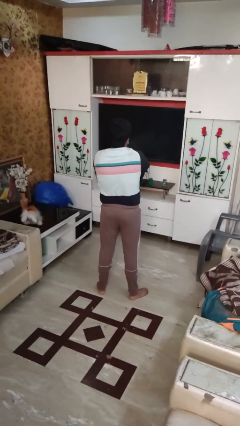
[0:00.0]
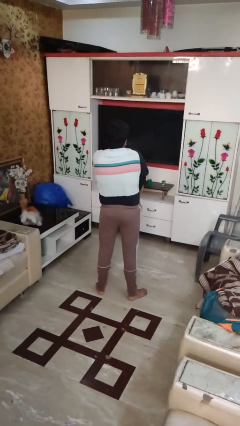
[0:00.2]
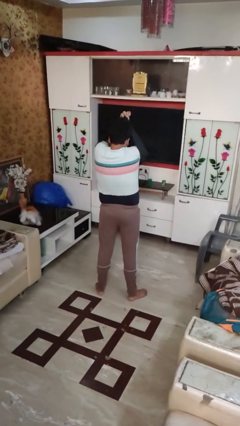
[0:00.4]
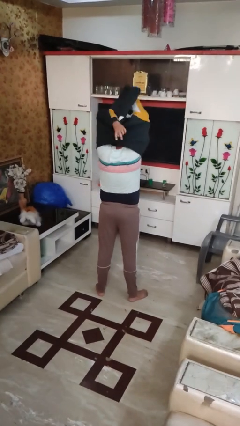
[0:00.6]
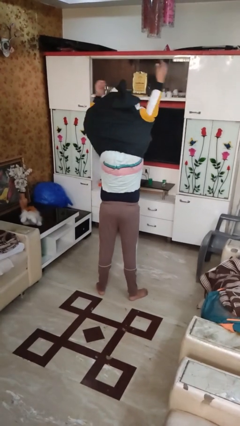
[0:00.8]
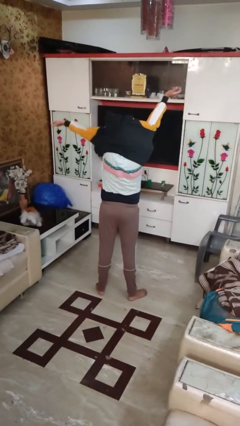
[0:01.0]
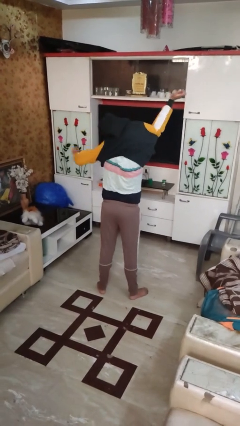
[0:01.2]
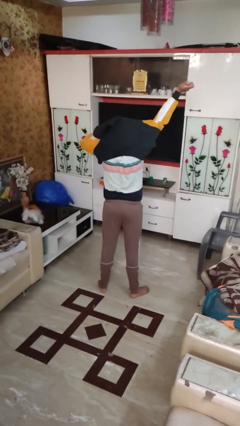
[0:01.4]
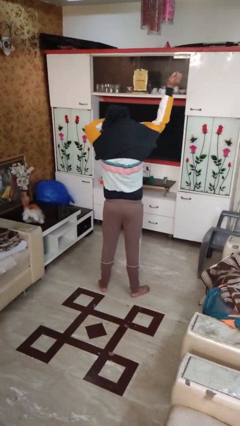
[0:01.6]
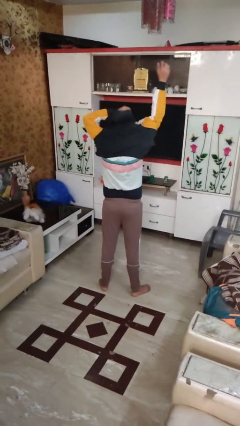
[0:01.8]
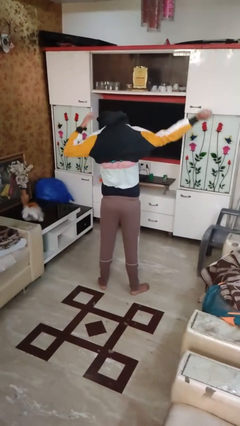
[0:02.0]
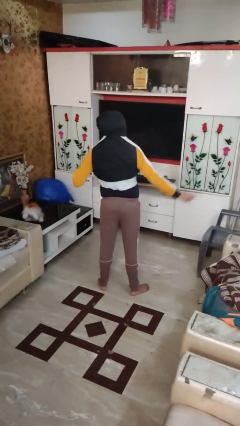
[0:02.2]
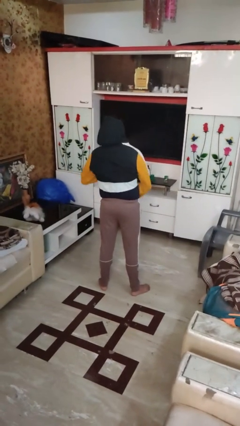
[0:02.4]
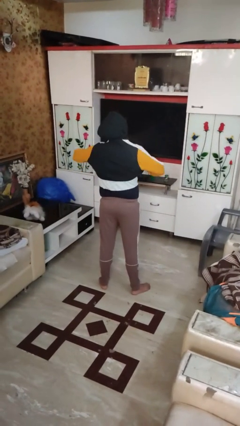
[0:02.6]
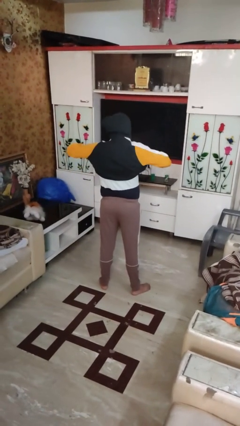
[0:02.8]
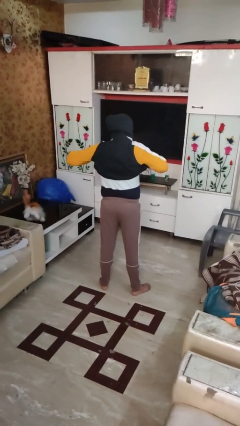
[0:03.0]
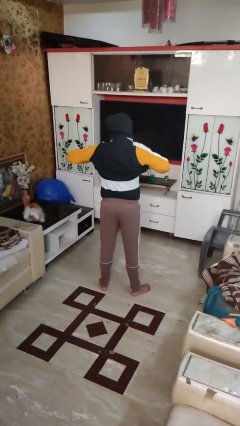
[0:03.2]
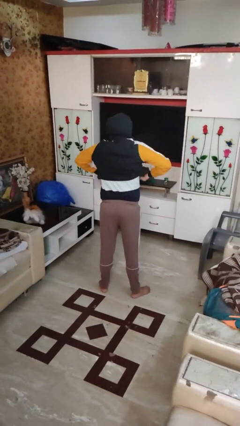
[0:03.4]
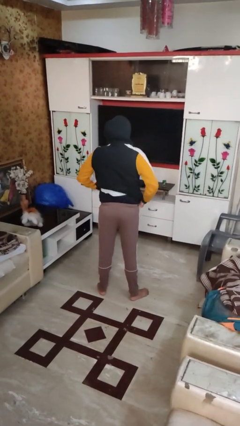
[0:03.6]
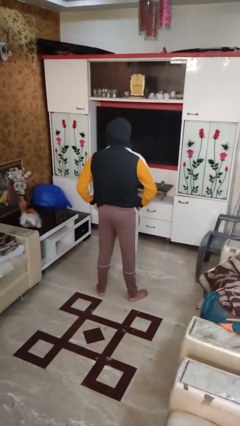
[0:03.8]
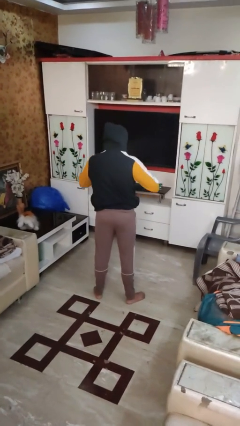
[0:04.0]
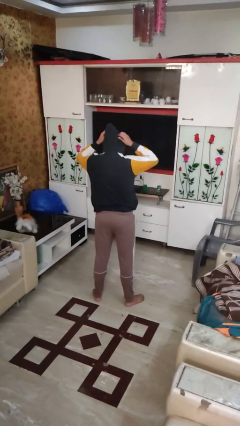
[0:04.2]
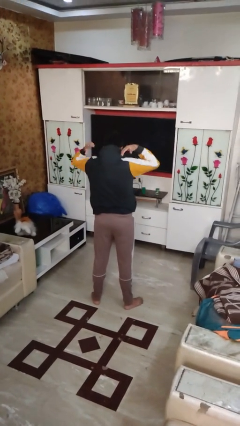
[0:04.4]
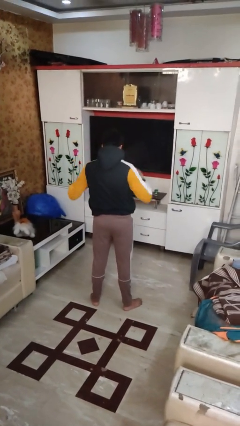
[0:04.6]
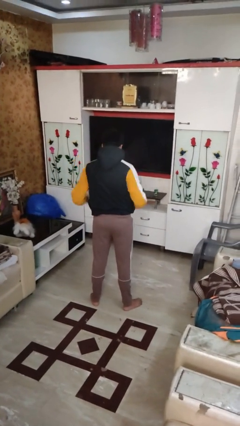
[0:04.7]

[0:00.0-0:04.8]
person puts on hoodie

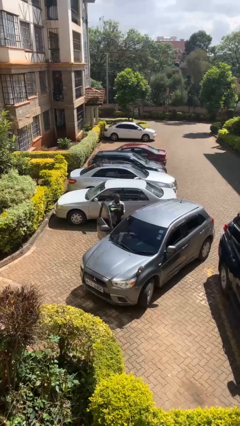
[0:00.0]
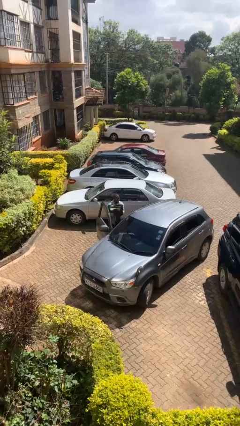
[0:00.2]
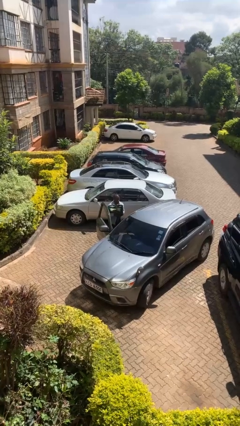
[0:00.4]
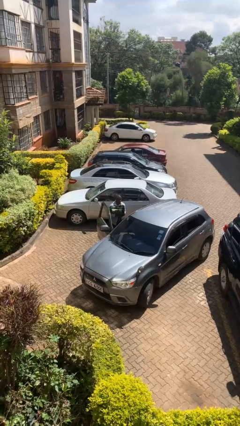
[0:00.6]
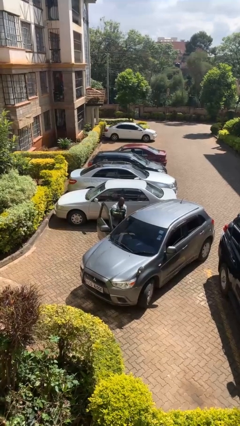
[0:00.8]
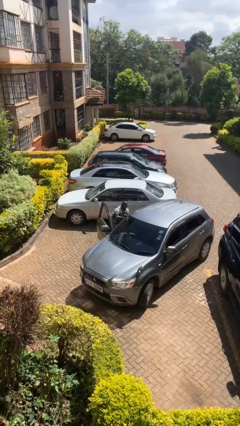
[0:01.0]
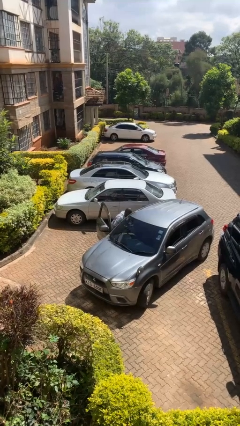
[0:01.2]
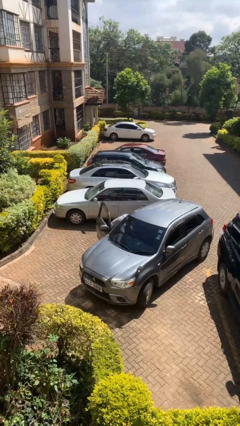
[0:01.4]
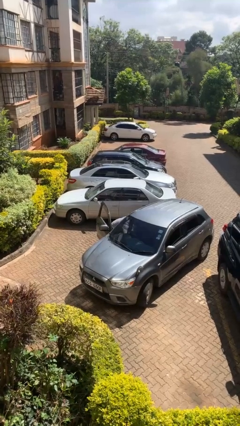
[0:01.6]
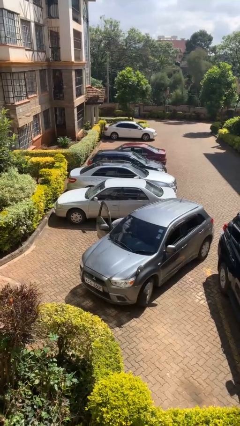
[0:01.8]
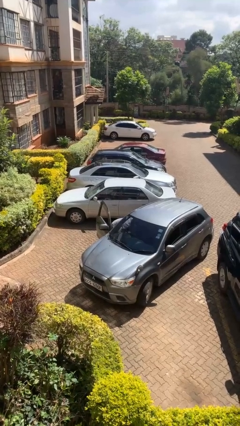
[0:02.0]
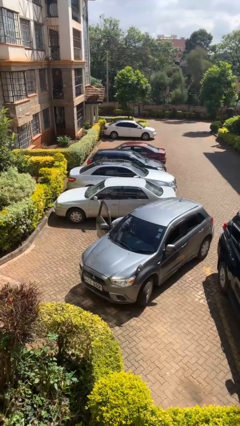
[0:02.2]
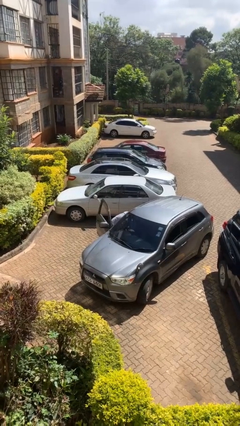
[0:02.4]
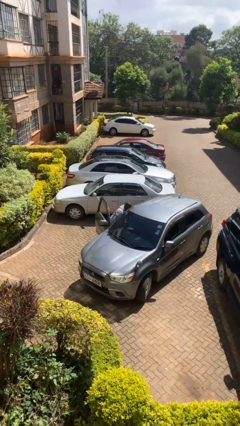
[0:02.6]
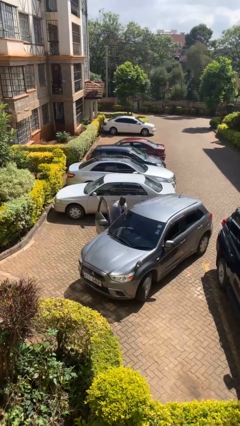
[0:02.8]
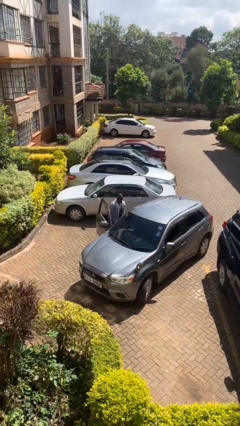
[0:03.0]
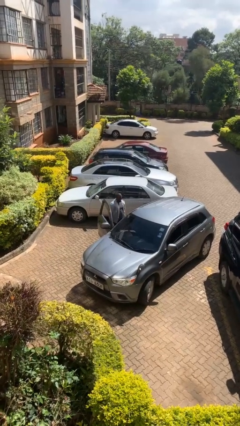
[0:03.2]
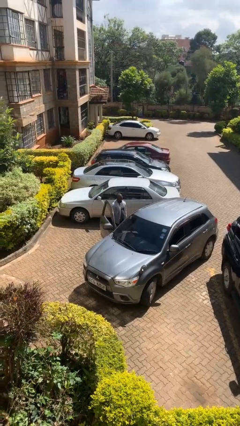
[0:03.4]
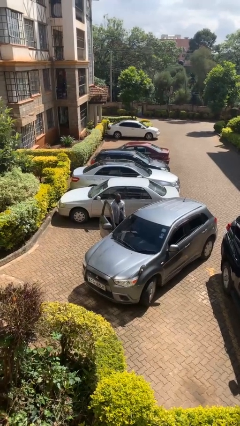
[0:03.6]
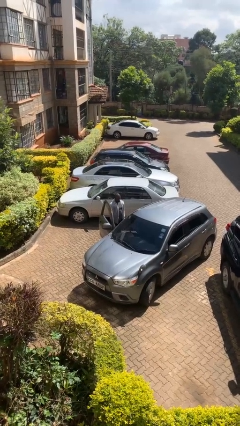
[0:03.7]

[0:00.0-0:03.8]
person loads car

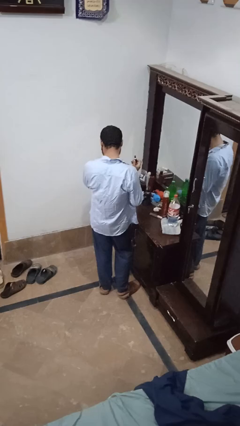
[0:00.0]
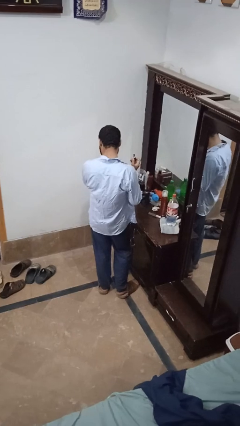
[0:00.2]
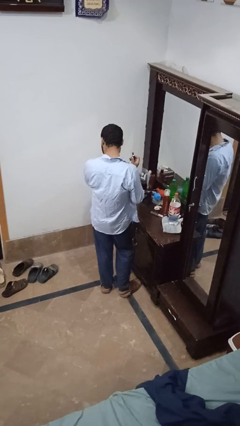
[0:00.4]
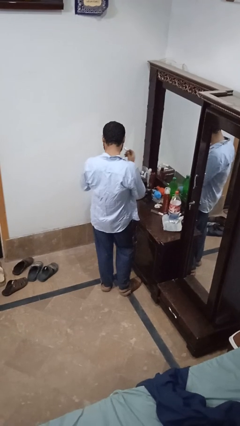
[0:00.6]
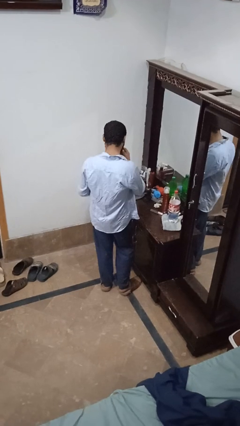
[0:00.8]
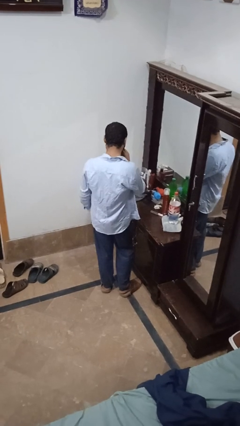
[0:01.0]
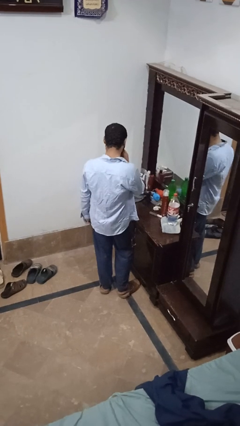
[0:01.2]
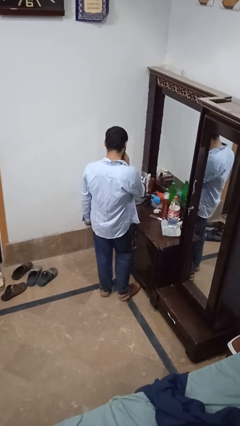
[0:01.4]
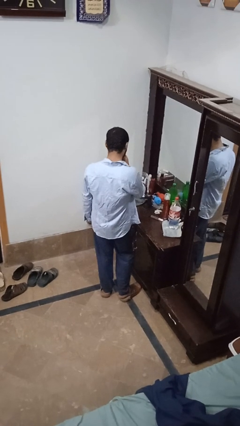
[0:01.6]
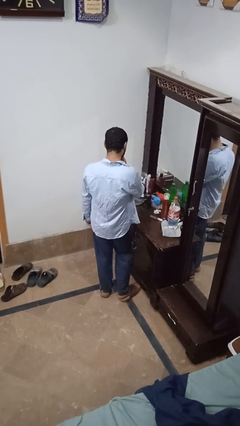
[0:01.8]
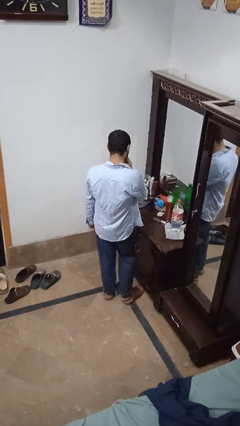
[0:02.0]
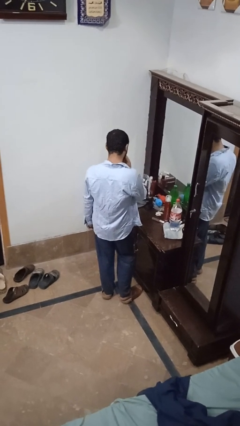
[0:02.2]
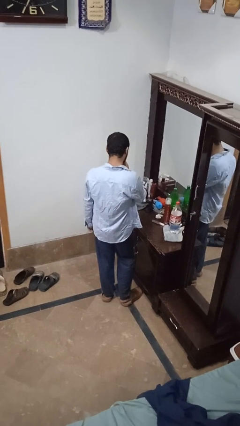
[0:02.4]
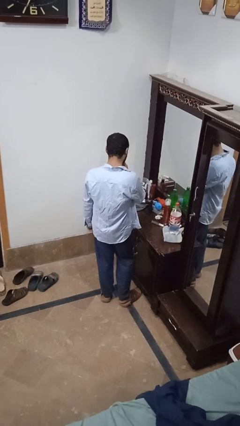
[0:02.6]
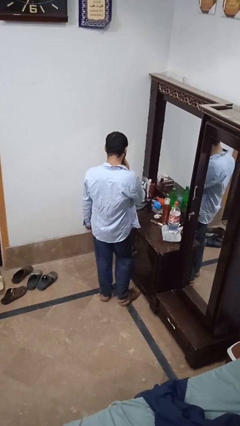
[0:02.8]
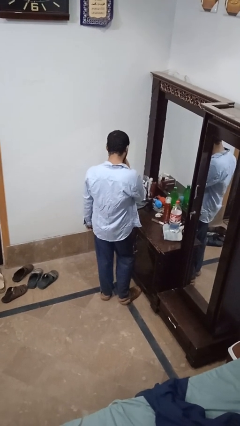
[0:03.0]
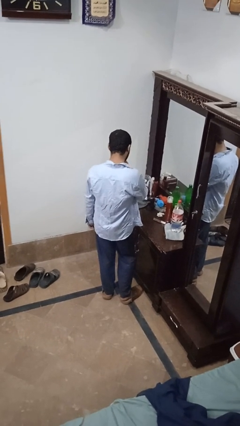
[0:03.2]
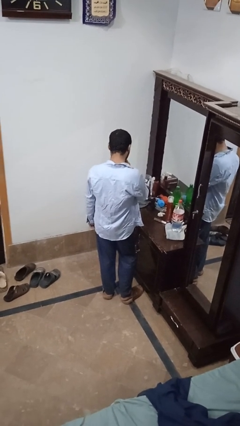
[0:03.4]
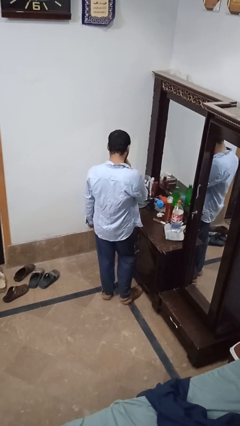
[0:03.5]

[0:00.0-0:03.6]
person applies lip makeup

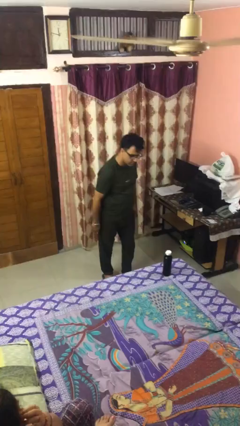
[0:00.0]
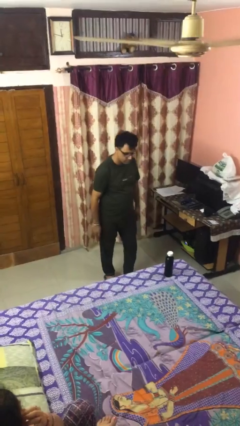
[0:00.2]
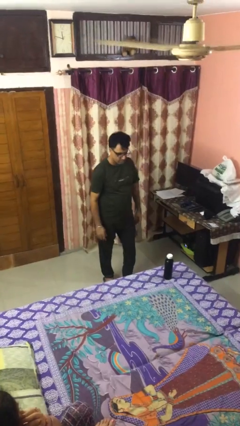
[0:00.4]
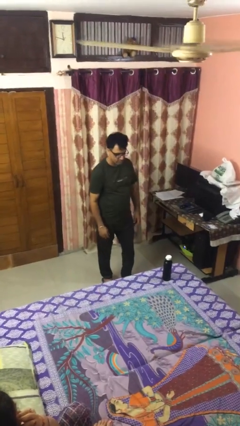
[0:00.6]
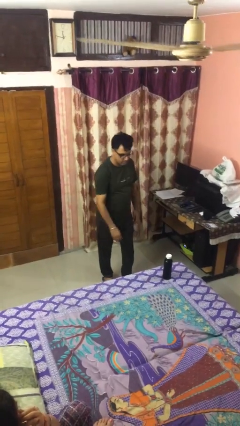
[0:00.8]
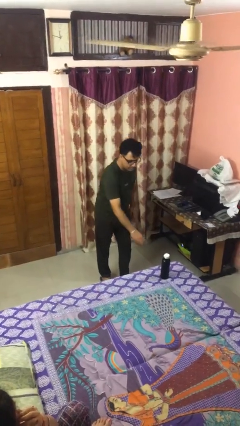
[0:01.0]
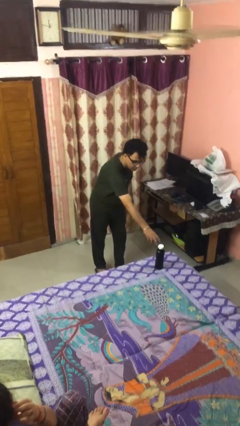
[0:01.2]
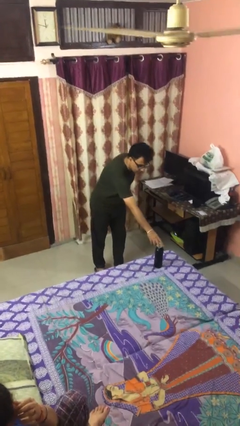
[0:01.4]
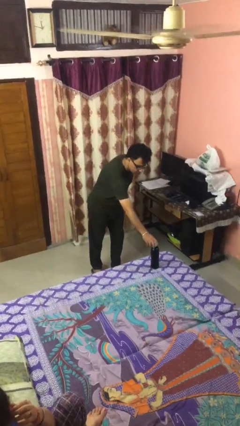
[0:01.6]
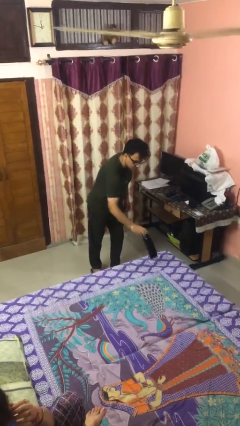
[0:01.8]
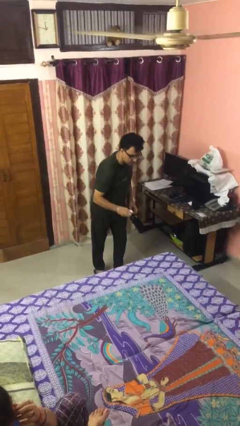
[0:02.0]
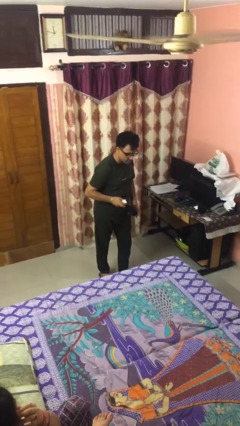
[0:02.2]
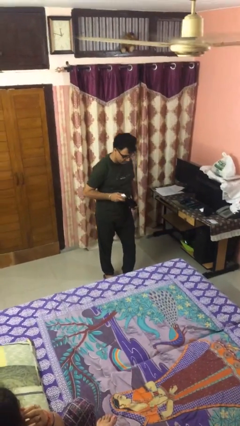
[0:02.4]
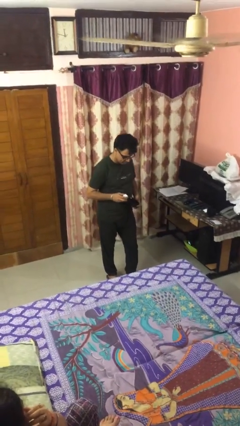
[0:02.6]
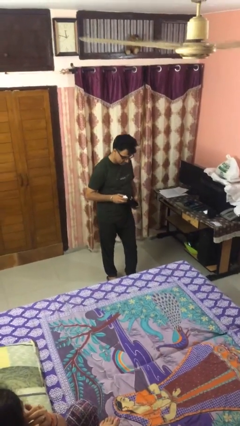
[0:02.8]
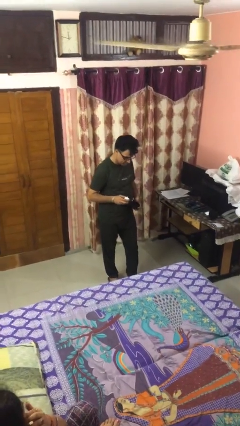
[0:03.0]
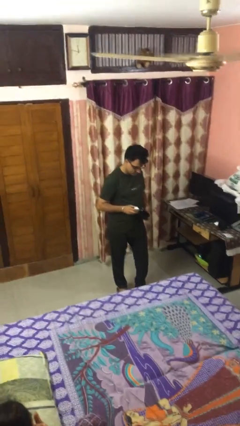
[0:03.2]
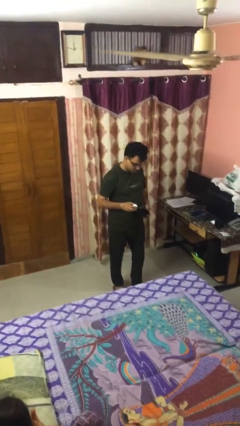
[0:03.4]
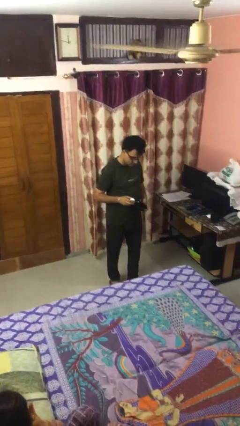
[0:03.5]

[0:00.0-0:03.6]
person picks up object from bed

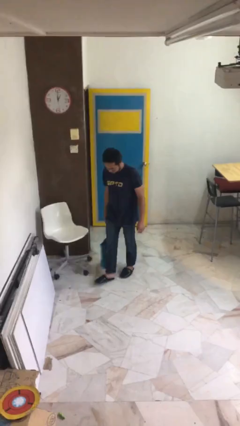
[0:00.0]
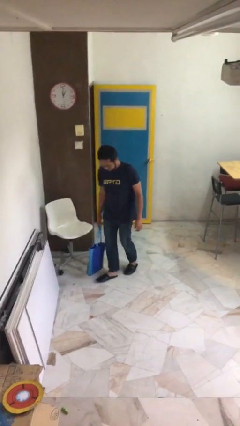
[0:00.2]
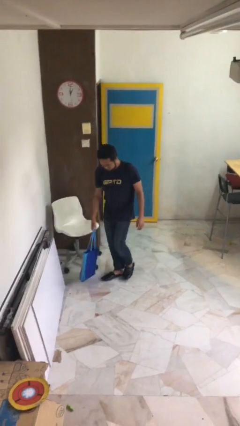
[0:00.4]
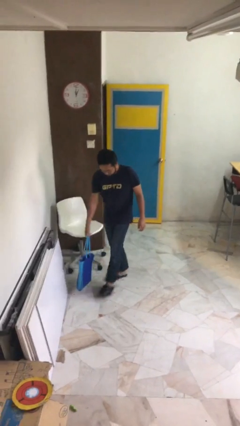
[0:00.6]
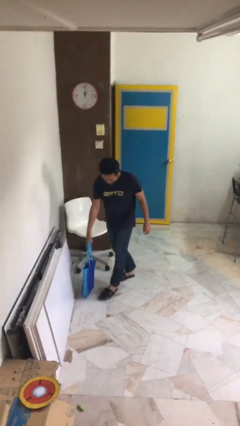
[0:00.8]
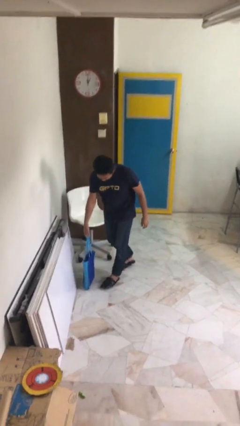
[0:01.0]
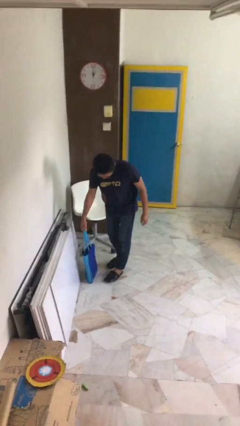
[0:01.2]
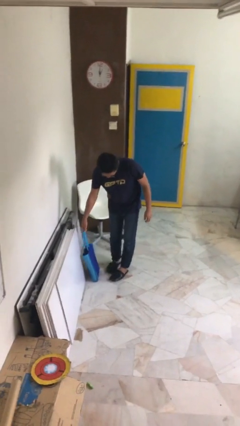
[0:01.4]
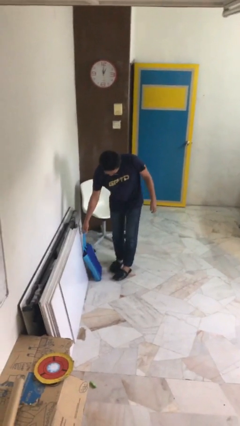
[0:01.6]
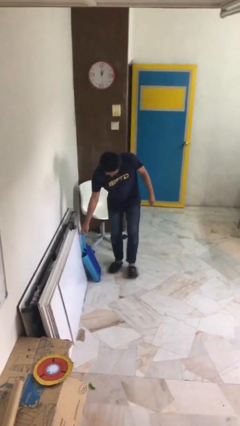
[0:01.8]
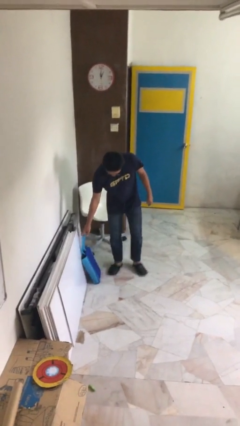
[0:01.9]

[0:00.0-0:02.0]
person puts down object on floor
